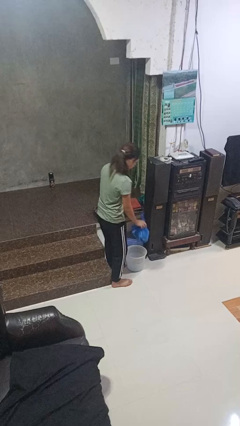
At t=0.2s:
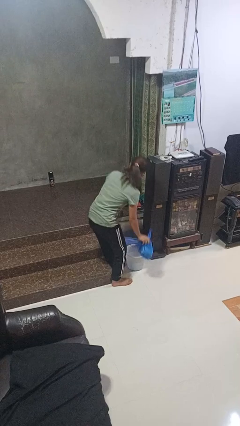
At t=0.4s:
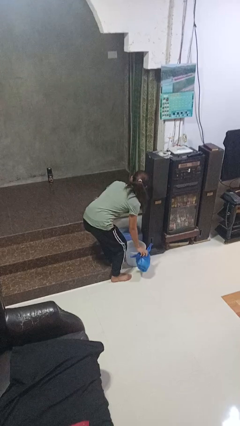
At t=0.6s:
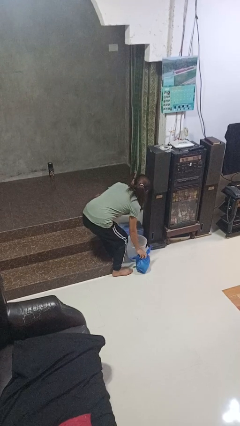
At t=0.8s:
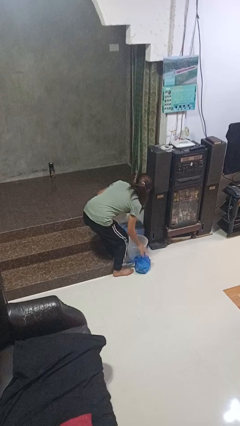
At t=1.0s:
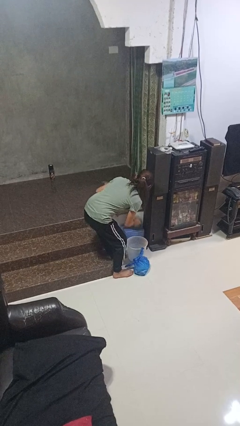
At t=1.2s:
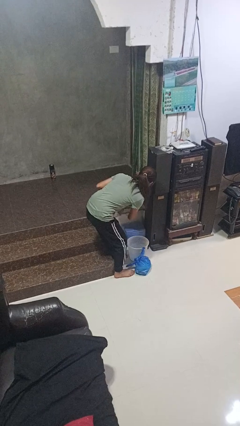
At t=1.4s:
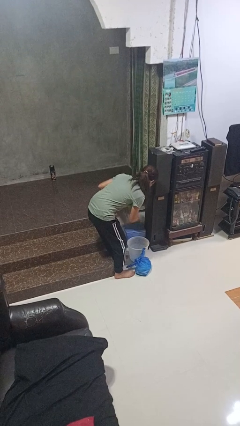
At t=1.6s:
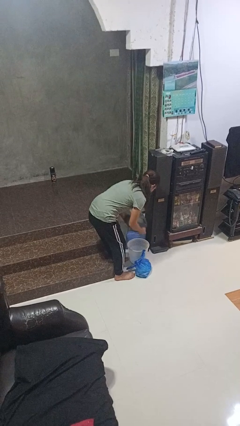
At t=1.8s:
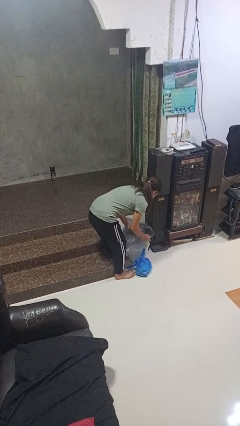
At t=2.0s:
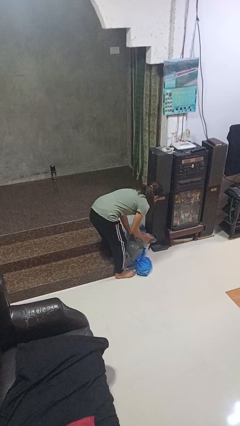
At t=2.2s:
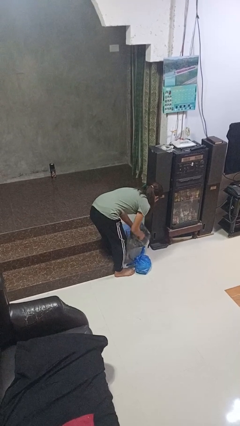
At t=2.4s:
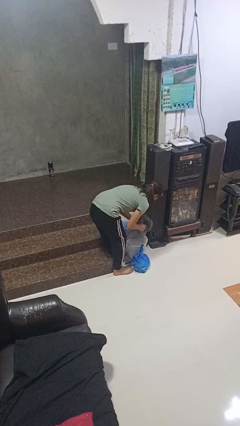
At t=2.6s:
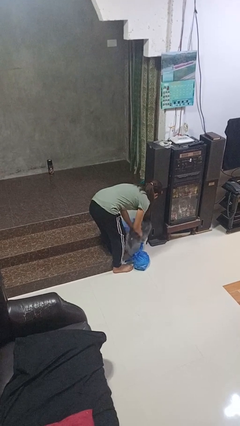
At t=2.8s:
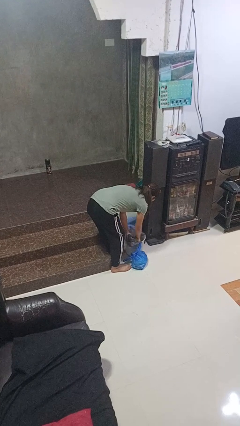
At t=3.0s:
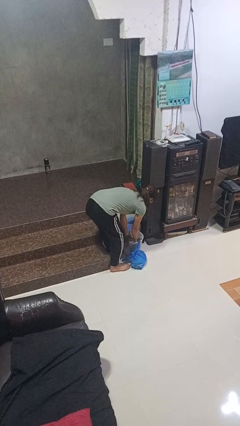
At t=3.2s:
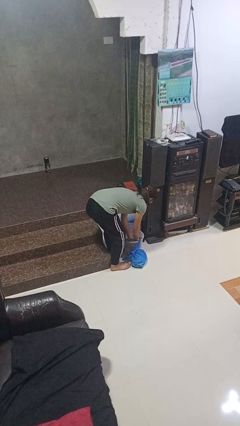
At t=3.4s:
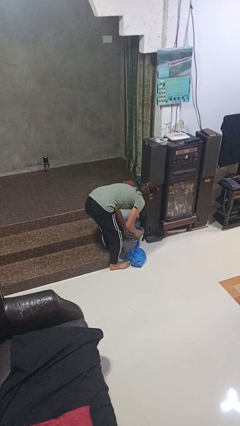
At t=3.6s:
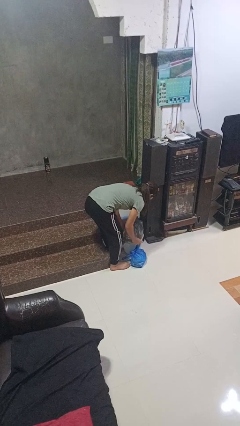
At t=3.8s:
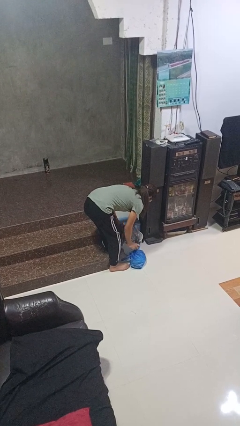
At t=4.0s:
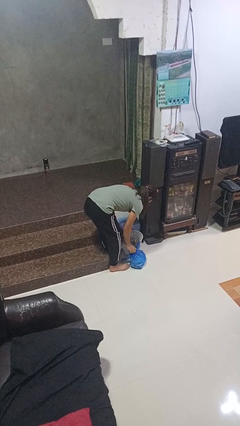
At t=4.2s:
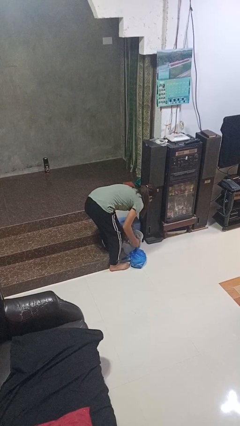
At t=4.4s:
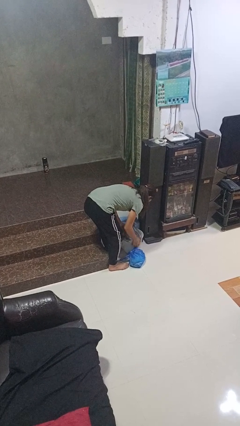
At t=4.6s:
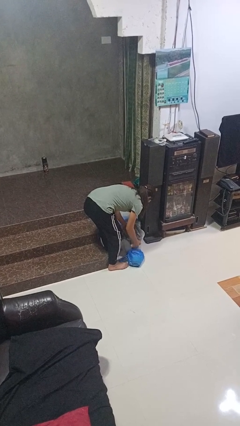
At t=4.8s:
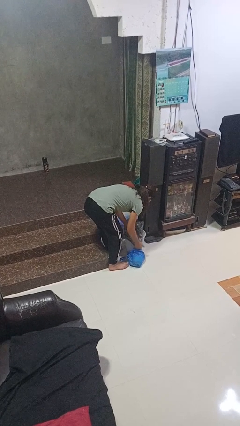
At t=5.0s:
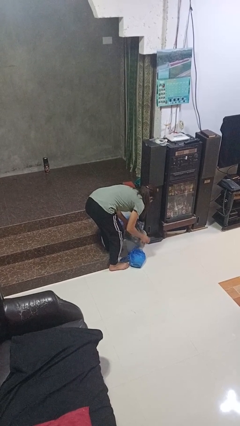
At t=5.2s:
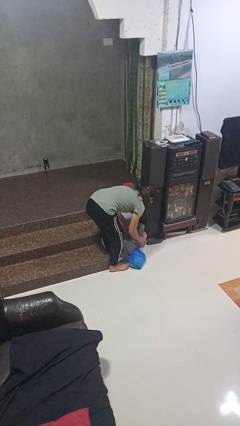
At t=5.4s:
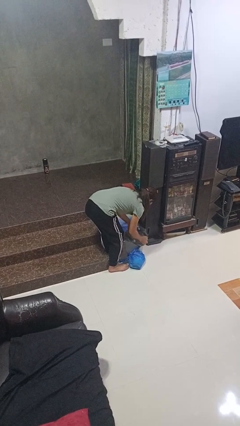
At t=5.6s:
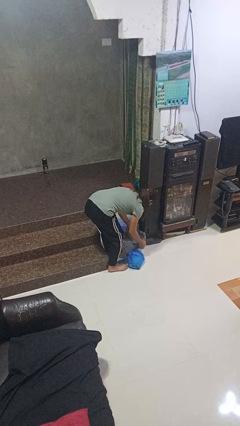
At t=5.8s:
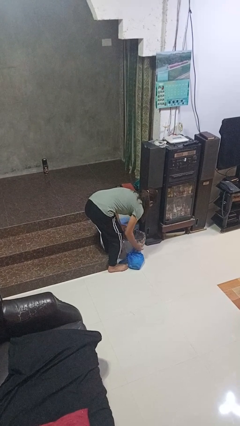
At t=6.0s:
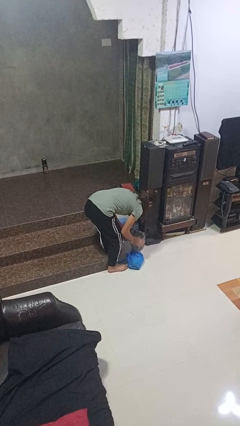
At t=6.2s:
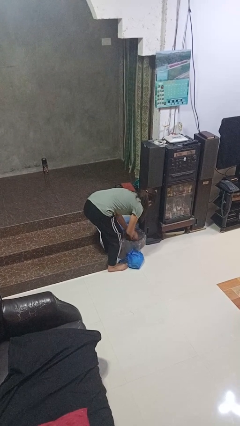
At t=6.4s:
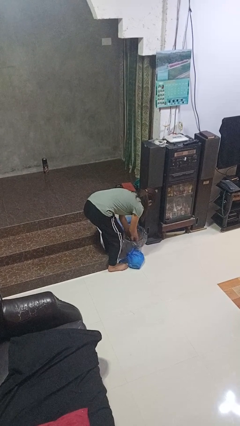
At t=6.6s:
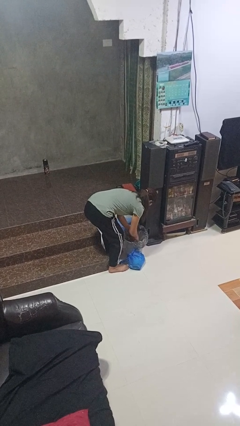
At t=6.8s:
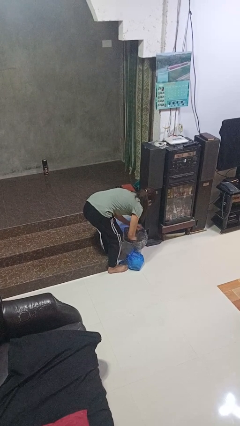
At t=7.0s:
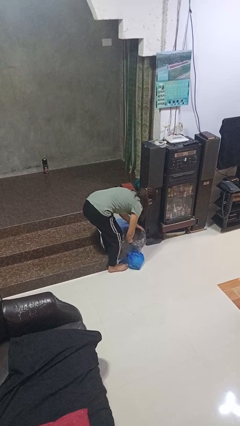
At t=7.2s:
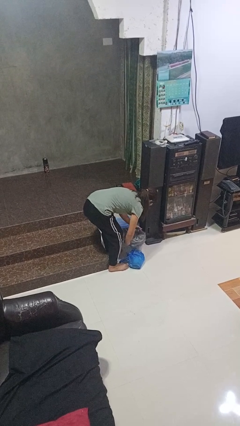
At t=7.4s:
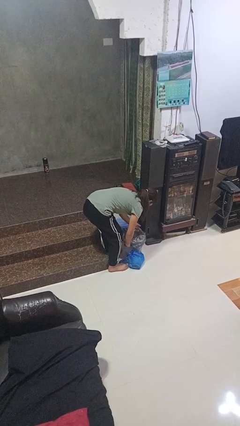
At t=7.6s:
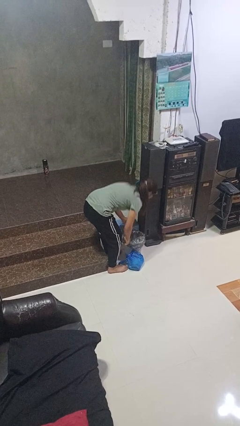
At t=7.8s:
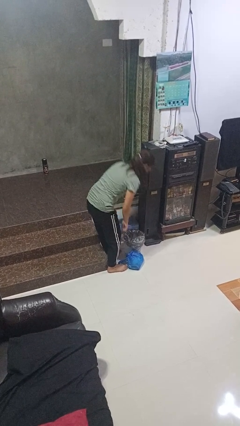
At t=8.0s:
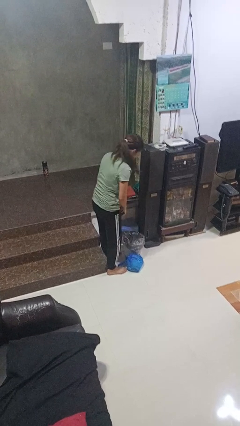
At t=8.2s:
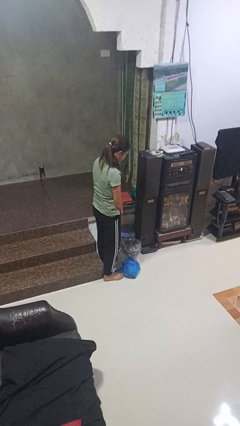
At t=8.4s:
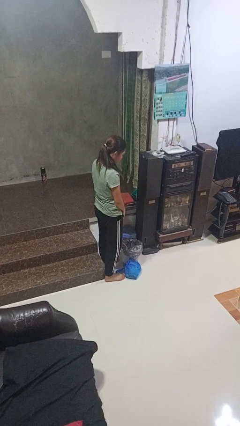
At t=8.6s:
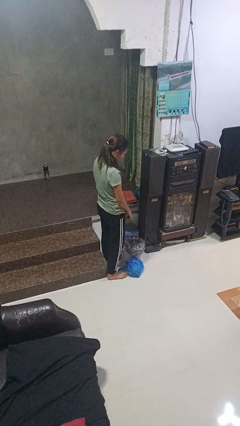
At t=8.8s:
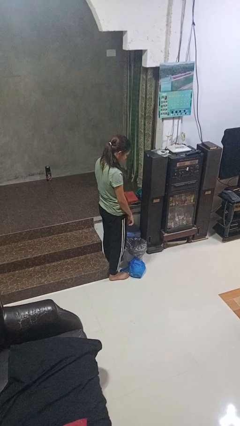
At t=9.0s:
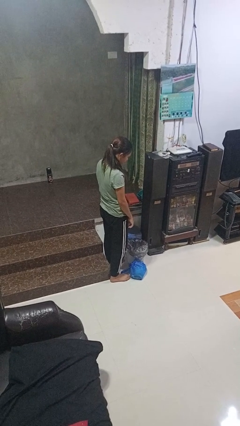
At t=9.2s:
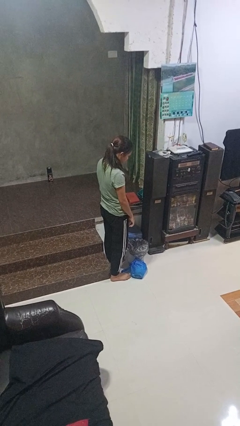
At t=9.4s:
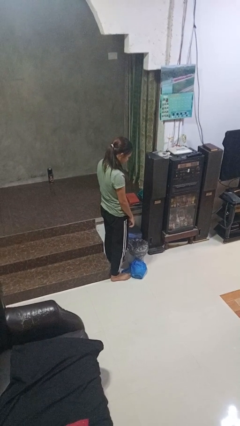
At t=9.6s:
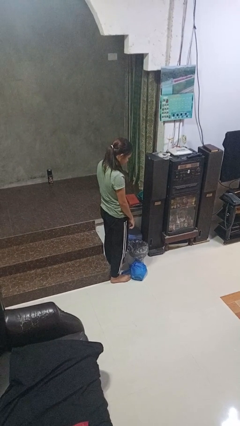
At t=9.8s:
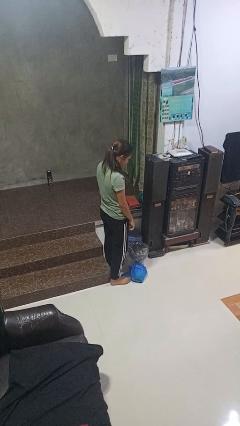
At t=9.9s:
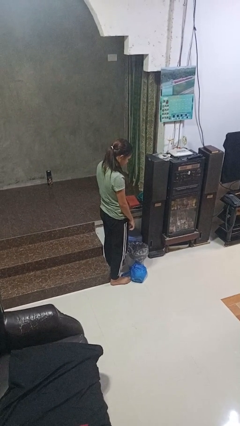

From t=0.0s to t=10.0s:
person inserts trashbag into trashcan

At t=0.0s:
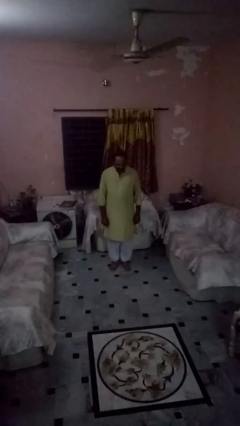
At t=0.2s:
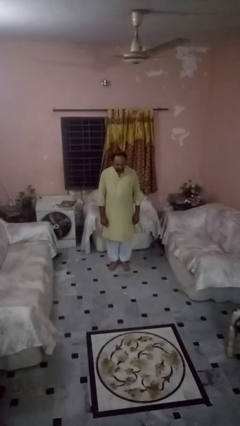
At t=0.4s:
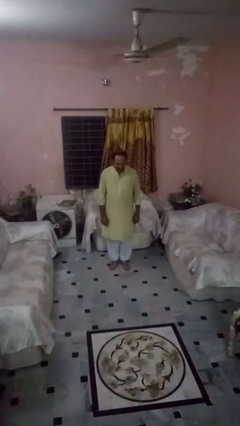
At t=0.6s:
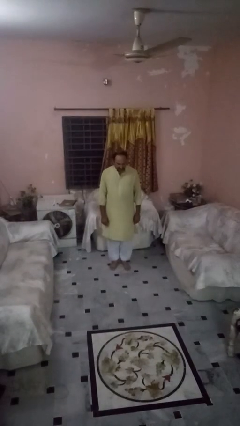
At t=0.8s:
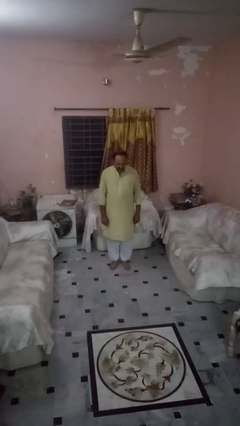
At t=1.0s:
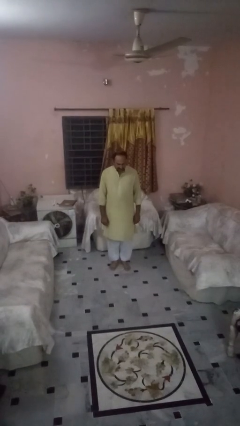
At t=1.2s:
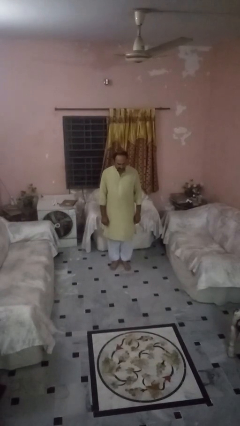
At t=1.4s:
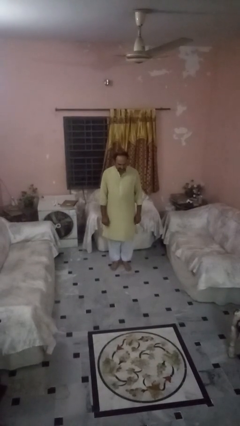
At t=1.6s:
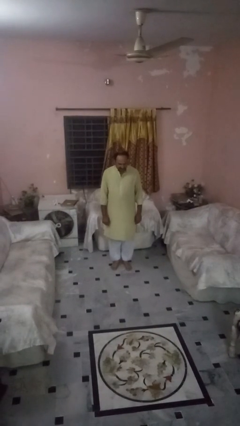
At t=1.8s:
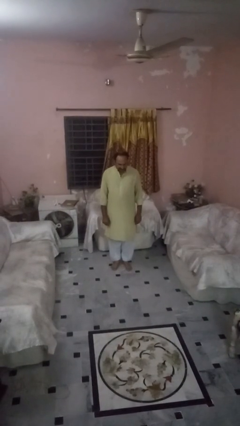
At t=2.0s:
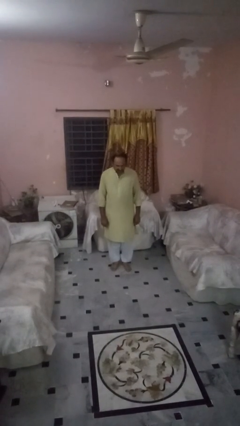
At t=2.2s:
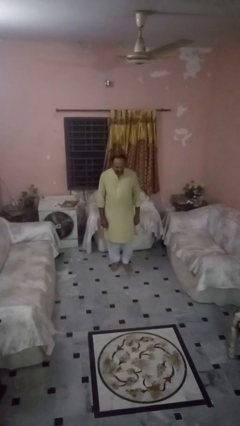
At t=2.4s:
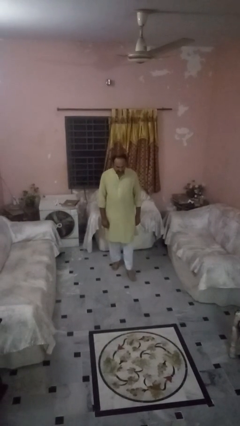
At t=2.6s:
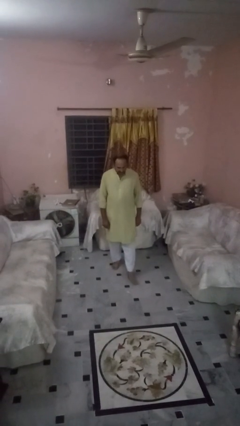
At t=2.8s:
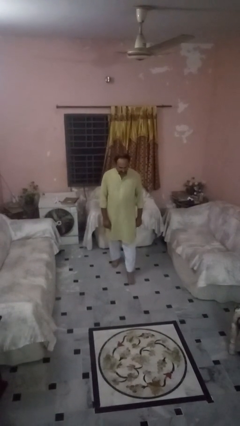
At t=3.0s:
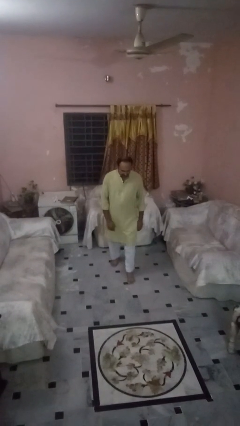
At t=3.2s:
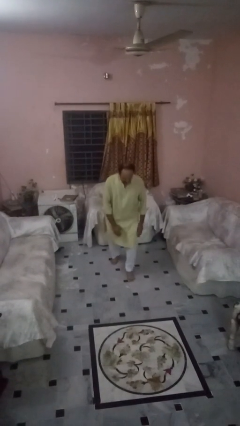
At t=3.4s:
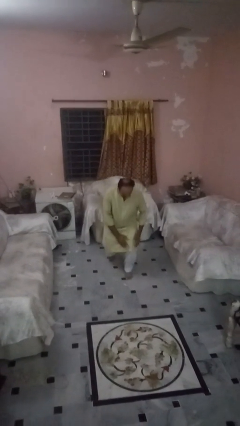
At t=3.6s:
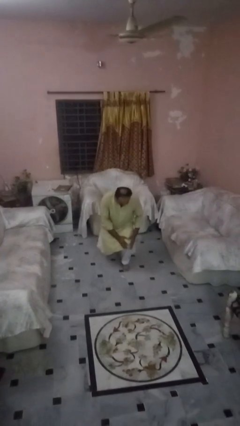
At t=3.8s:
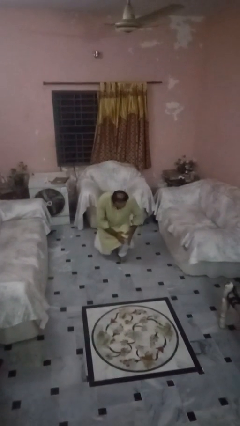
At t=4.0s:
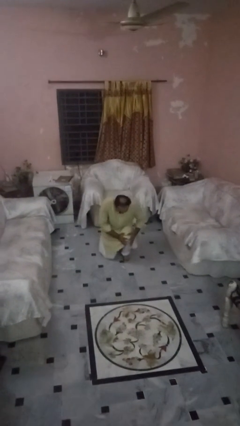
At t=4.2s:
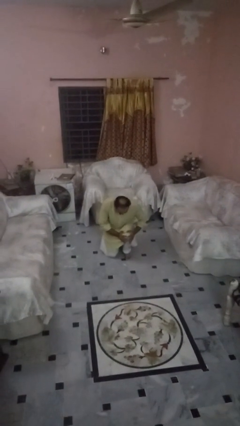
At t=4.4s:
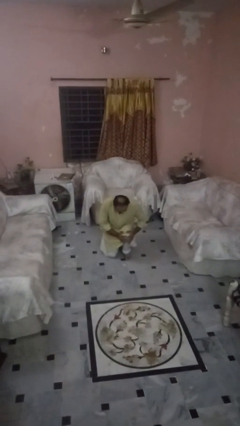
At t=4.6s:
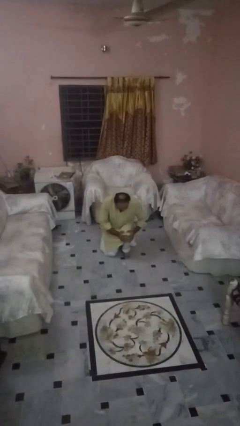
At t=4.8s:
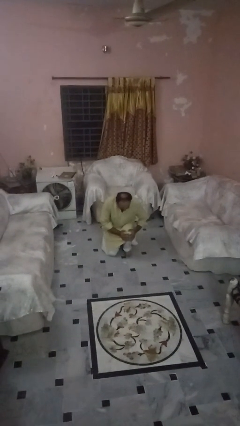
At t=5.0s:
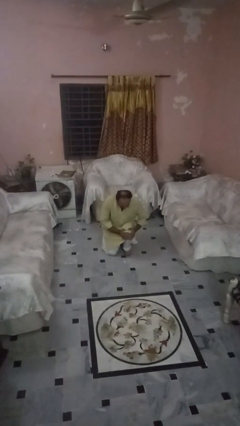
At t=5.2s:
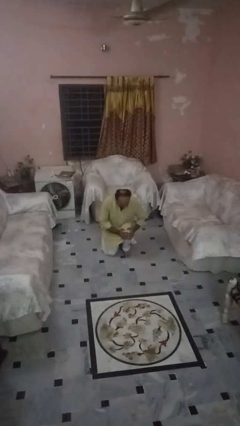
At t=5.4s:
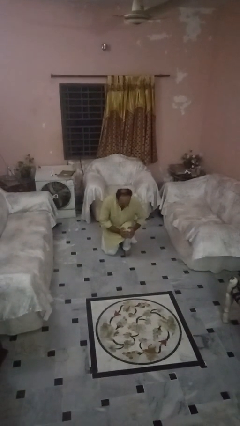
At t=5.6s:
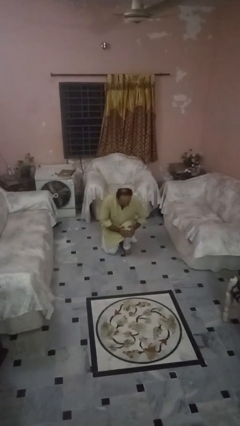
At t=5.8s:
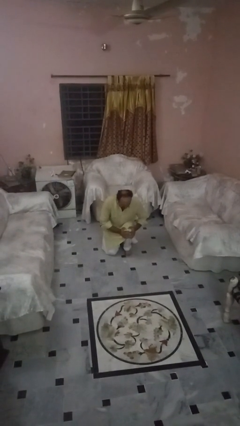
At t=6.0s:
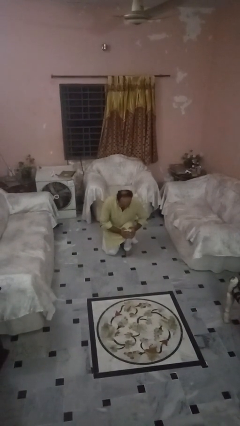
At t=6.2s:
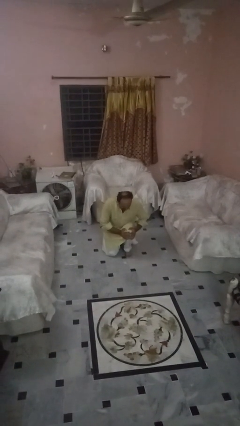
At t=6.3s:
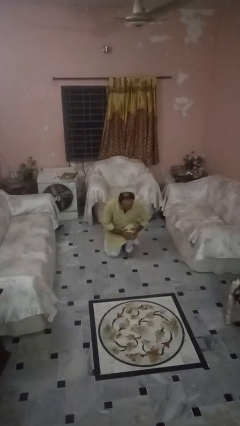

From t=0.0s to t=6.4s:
person exercises with lunges

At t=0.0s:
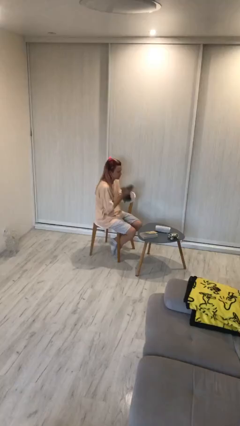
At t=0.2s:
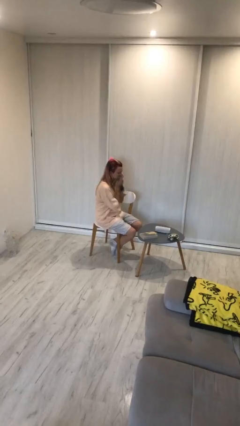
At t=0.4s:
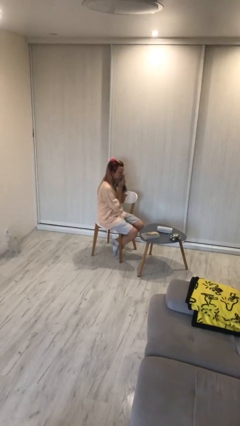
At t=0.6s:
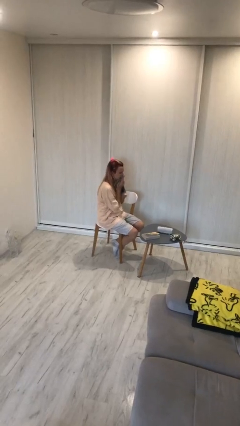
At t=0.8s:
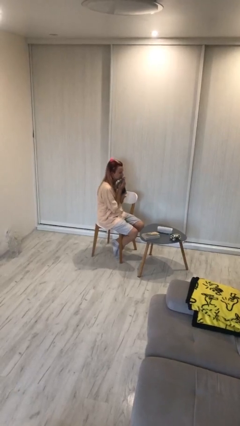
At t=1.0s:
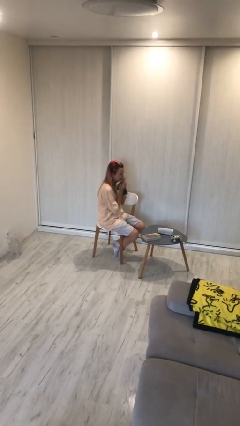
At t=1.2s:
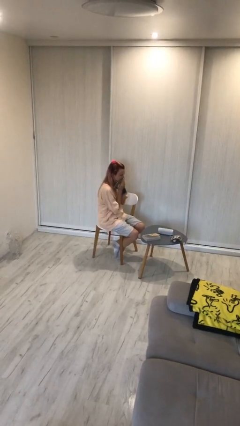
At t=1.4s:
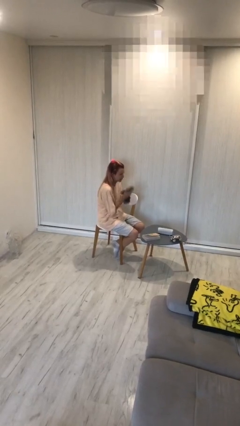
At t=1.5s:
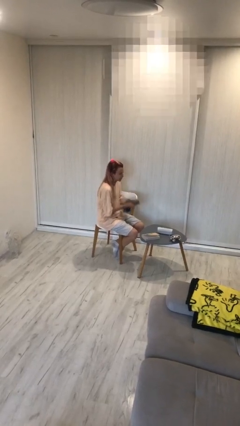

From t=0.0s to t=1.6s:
person wipes mouth with napkin
